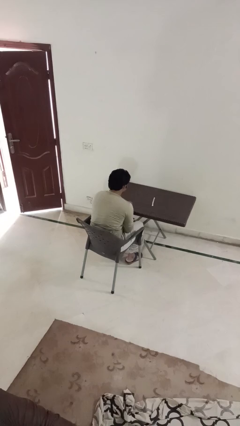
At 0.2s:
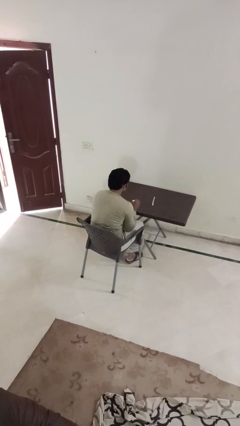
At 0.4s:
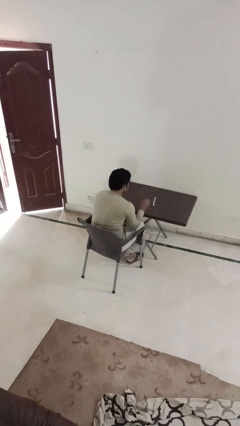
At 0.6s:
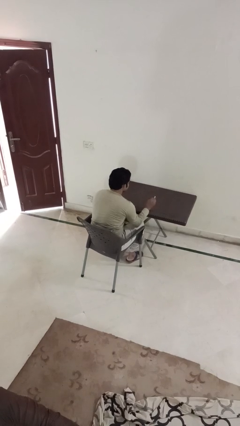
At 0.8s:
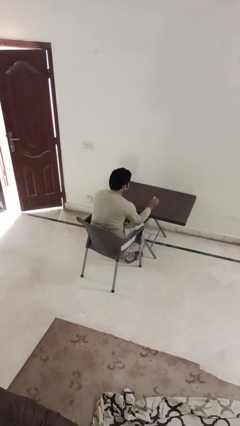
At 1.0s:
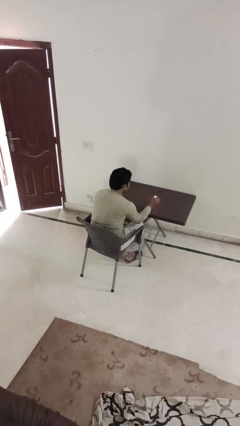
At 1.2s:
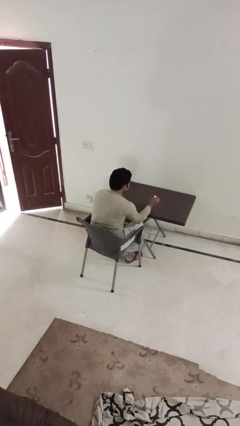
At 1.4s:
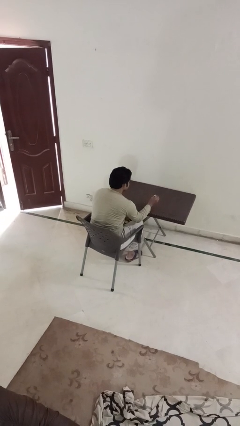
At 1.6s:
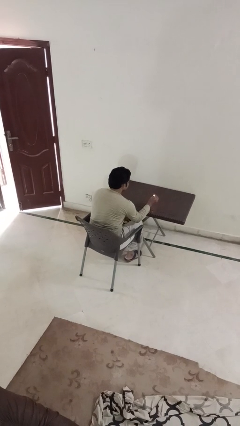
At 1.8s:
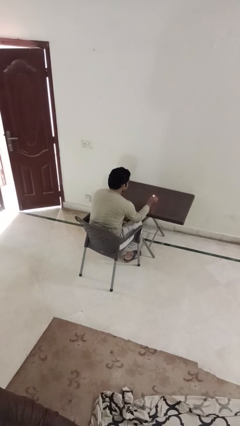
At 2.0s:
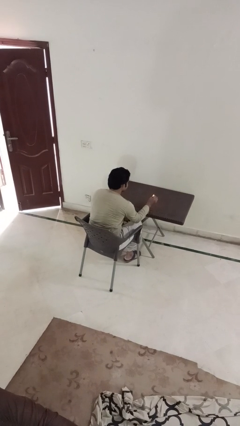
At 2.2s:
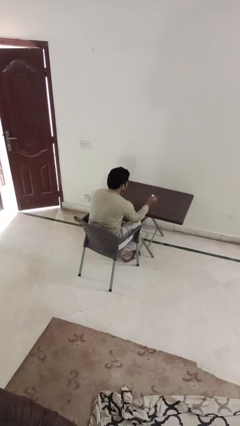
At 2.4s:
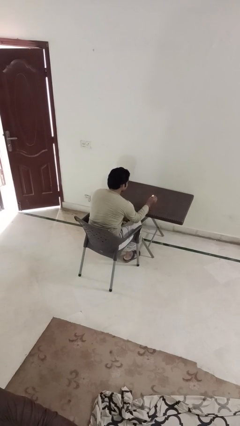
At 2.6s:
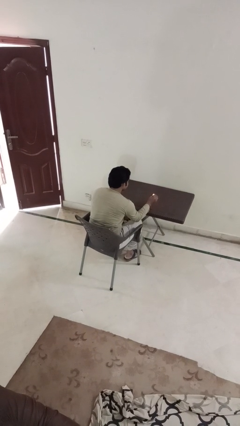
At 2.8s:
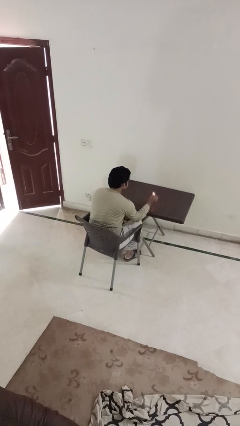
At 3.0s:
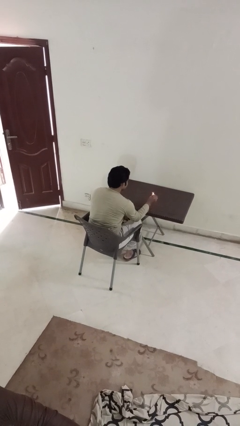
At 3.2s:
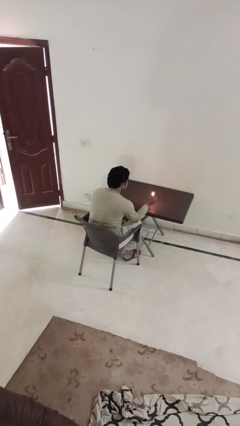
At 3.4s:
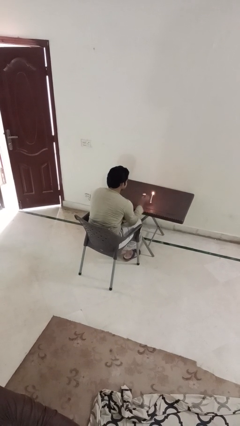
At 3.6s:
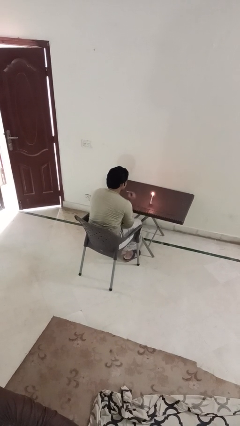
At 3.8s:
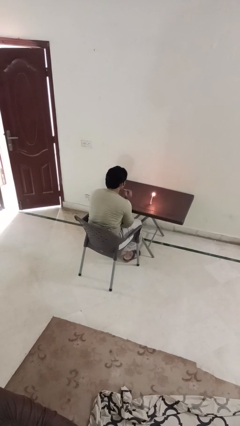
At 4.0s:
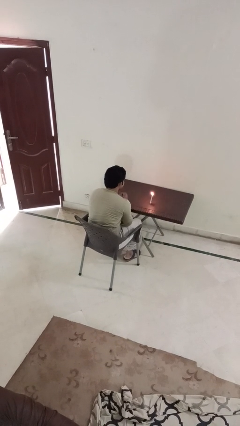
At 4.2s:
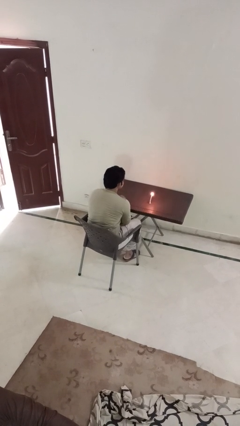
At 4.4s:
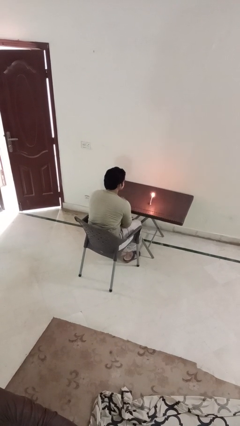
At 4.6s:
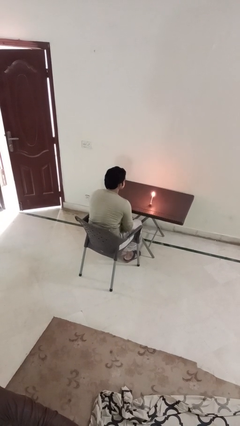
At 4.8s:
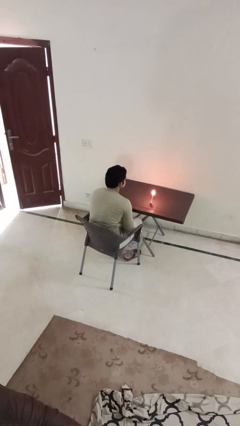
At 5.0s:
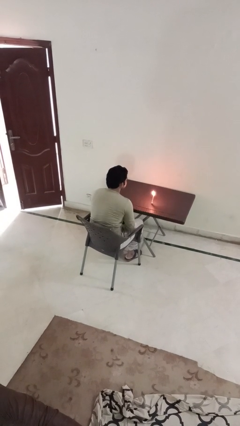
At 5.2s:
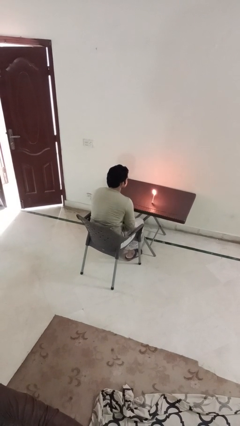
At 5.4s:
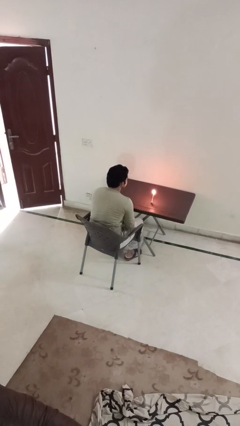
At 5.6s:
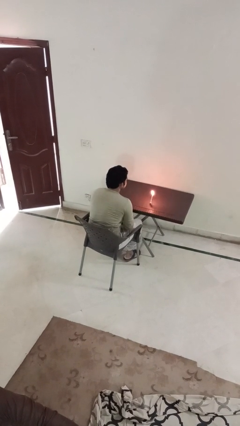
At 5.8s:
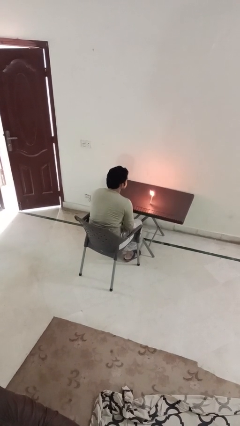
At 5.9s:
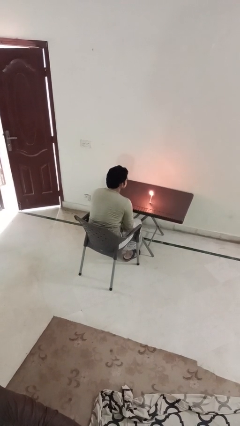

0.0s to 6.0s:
person lights candle

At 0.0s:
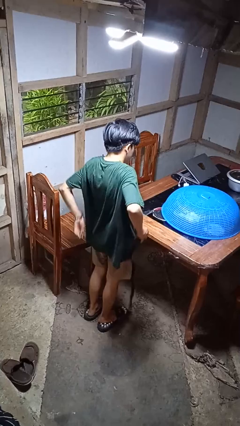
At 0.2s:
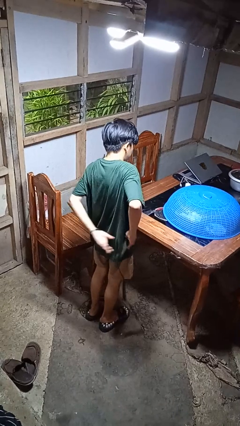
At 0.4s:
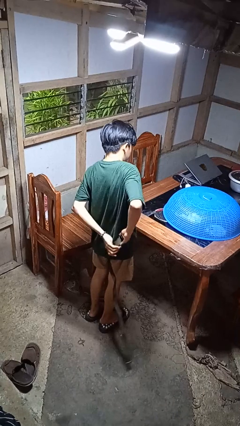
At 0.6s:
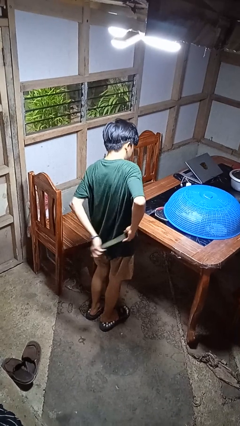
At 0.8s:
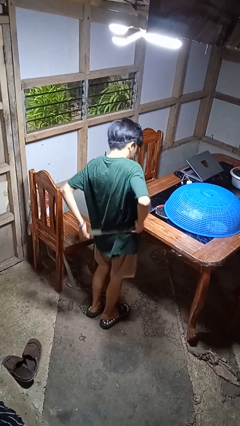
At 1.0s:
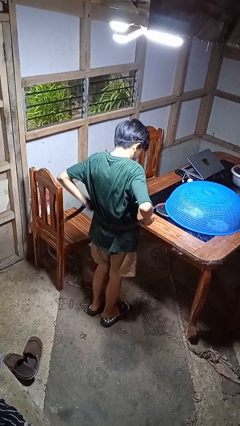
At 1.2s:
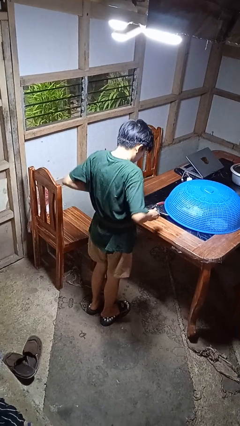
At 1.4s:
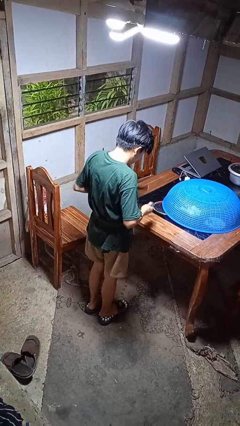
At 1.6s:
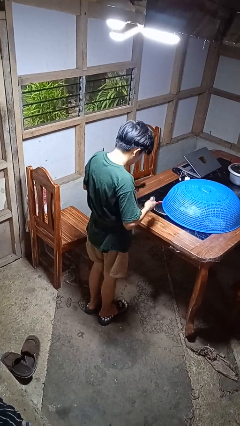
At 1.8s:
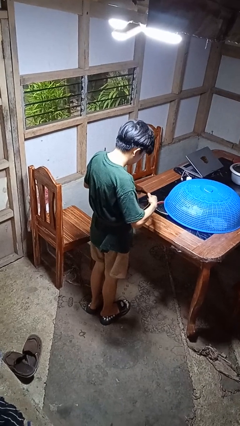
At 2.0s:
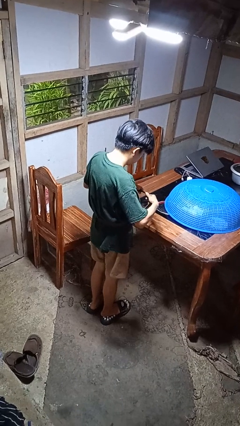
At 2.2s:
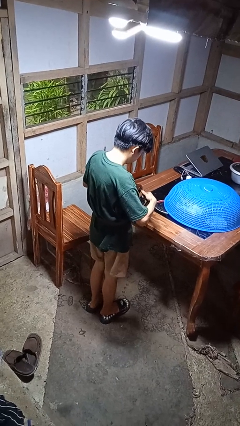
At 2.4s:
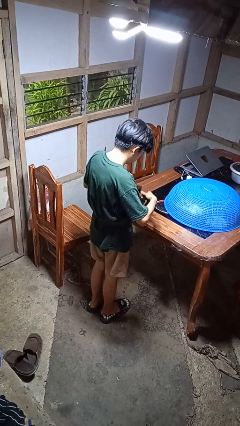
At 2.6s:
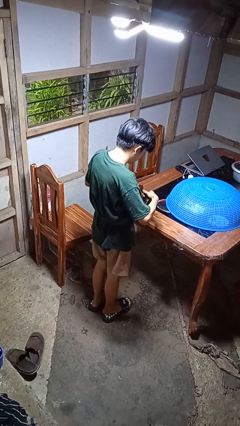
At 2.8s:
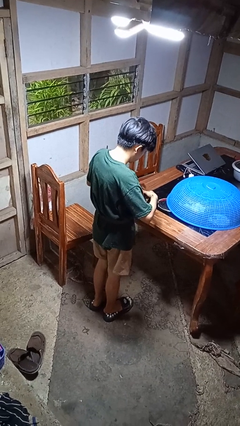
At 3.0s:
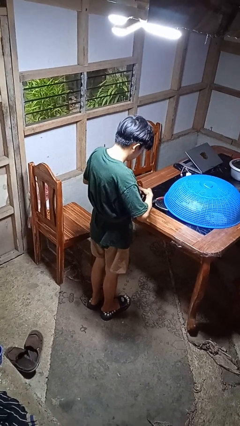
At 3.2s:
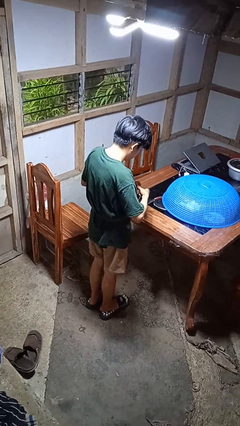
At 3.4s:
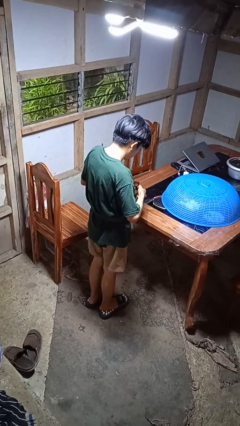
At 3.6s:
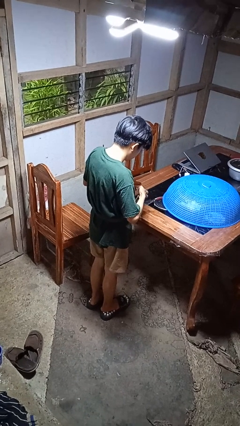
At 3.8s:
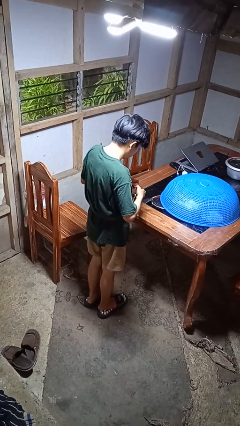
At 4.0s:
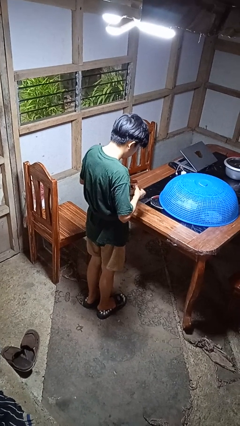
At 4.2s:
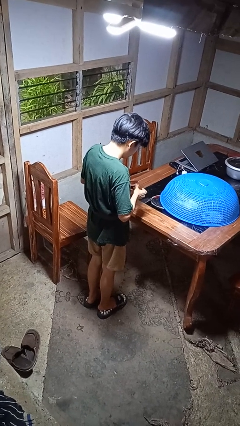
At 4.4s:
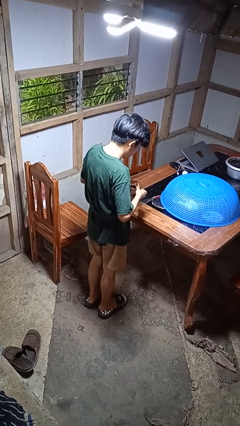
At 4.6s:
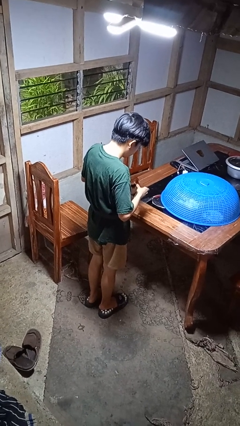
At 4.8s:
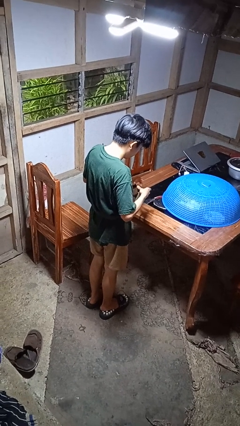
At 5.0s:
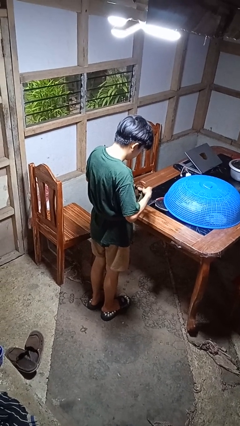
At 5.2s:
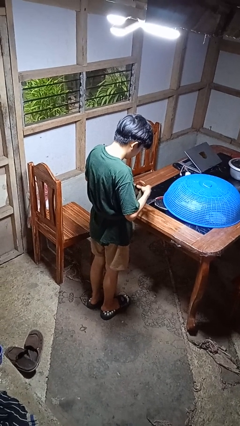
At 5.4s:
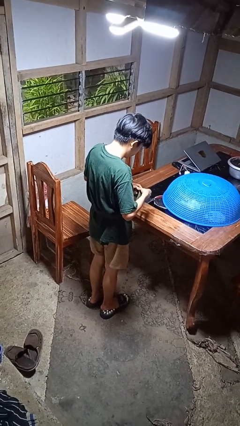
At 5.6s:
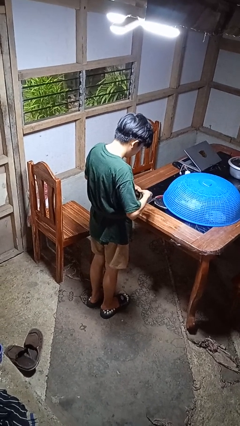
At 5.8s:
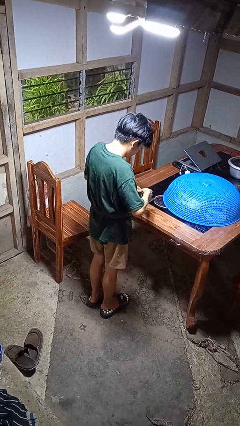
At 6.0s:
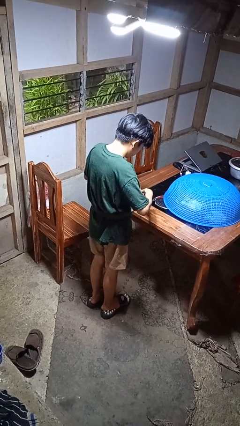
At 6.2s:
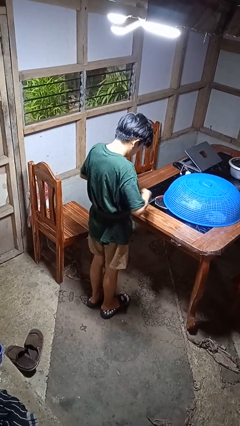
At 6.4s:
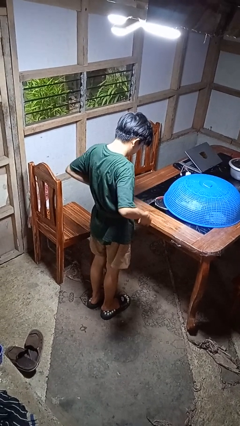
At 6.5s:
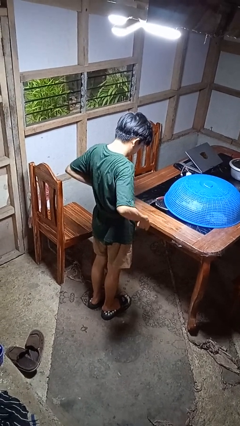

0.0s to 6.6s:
person puts on belt

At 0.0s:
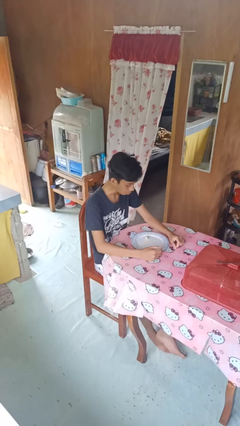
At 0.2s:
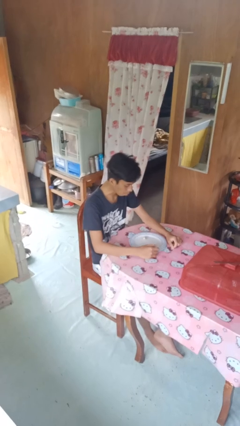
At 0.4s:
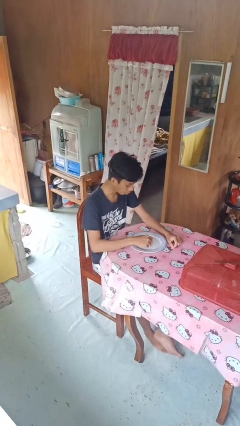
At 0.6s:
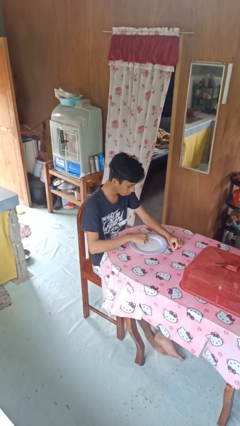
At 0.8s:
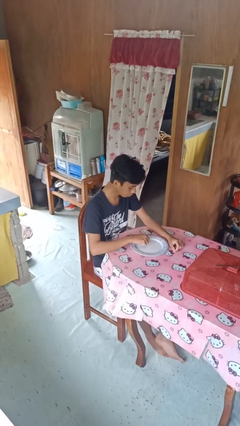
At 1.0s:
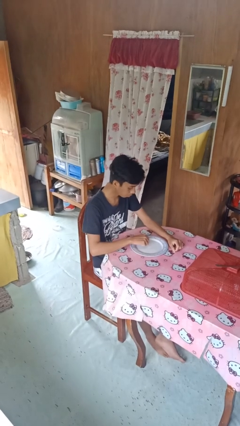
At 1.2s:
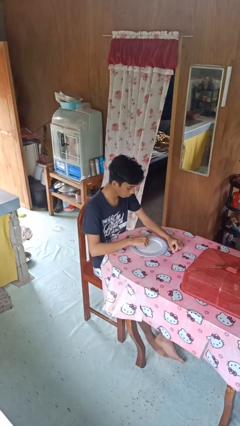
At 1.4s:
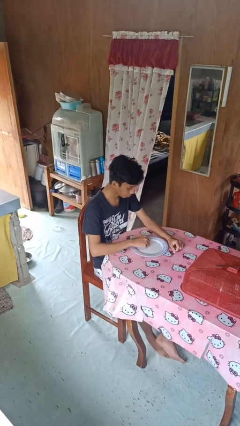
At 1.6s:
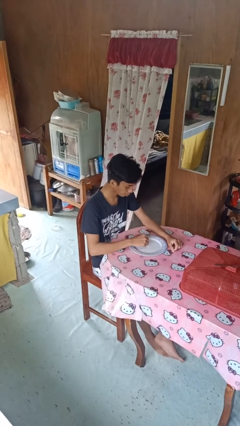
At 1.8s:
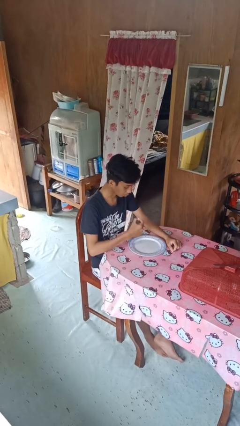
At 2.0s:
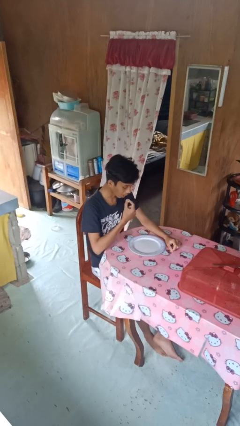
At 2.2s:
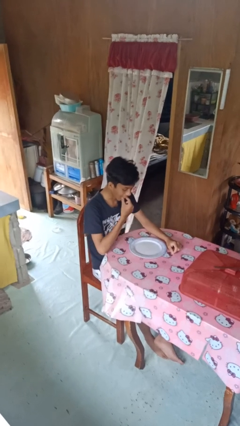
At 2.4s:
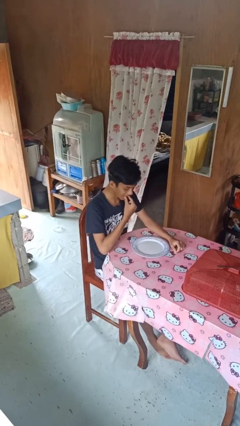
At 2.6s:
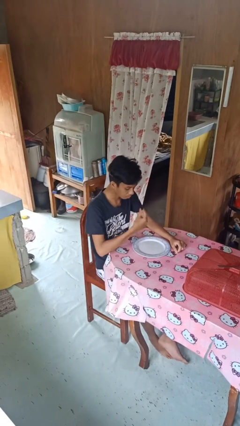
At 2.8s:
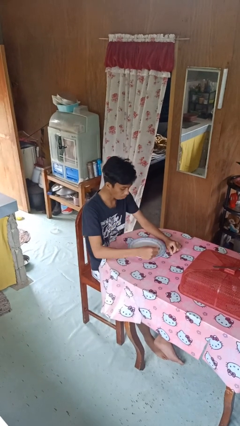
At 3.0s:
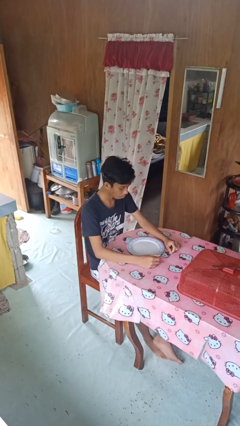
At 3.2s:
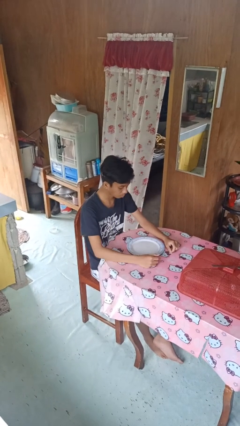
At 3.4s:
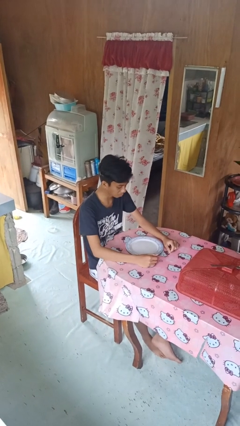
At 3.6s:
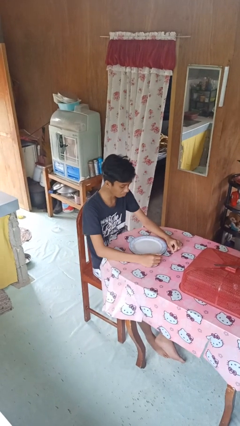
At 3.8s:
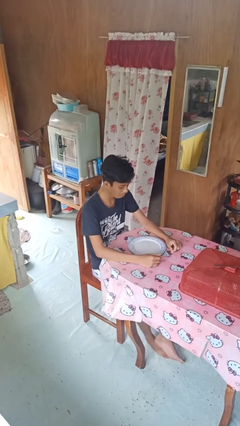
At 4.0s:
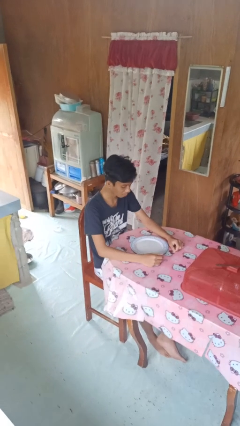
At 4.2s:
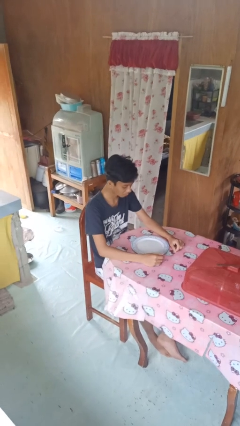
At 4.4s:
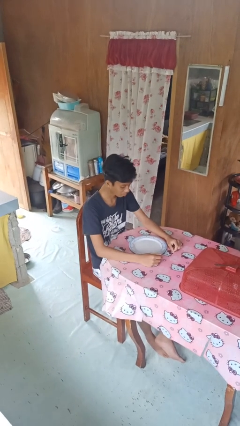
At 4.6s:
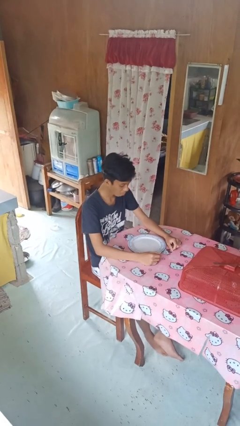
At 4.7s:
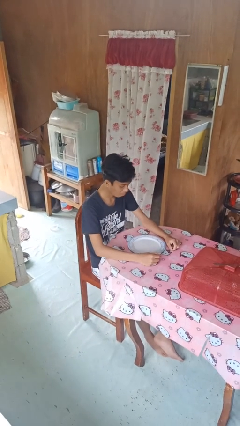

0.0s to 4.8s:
person eats with hands

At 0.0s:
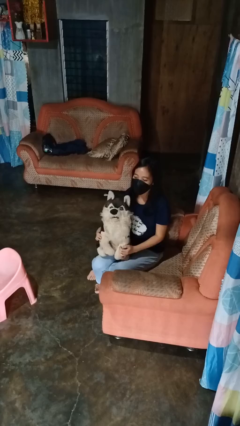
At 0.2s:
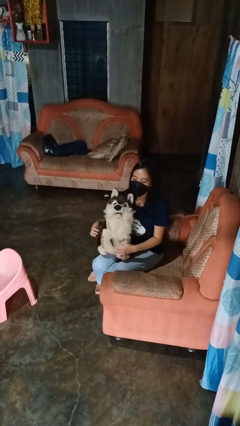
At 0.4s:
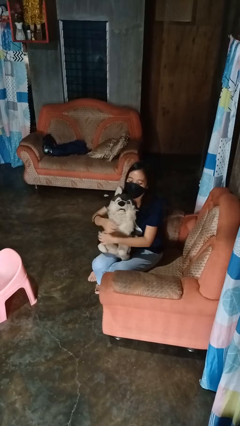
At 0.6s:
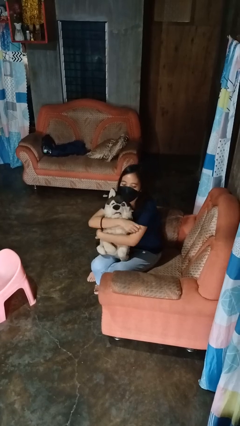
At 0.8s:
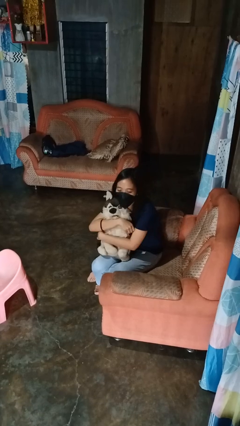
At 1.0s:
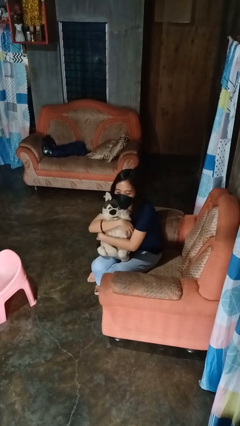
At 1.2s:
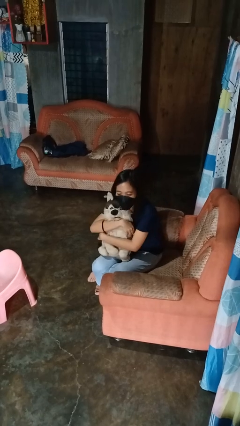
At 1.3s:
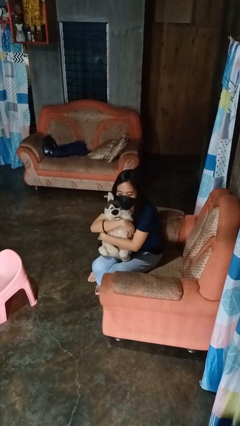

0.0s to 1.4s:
person hugs stuffed animal
